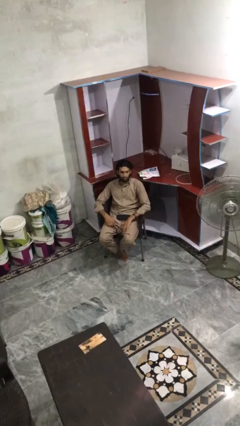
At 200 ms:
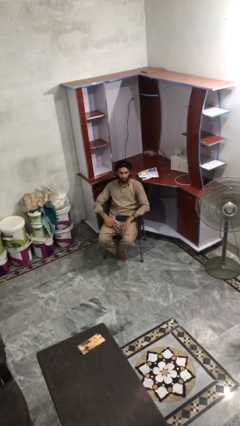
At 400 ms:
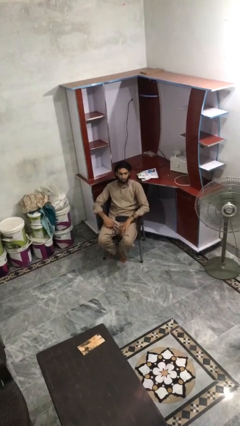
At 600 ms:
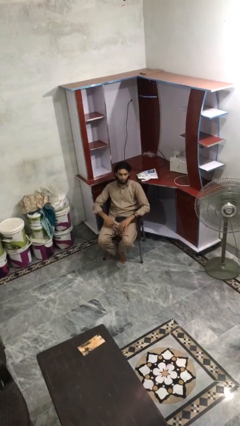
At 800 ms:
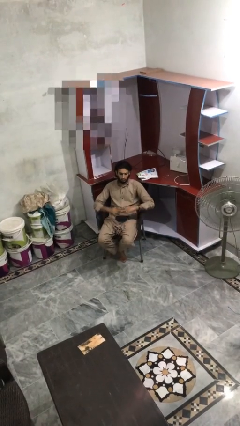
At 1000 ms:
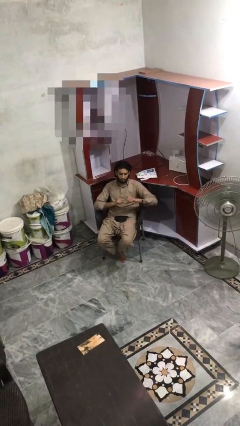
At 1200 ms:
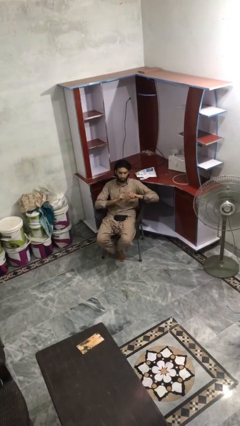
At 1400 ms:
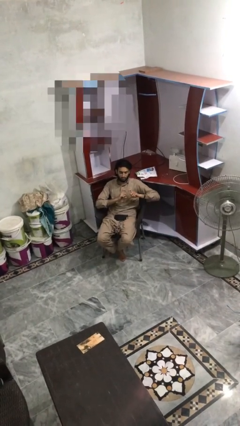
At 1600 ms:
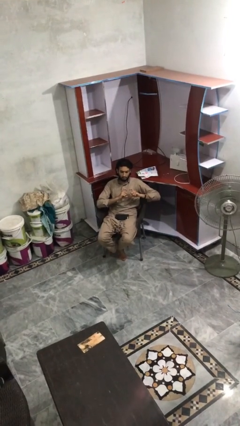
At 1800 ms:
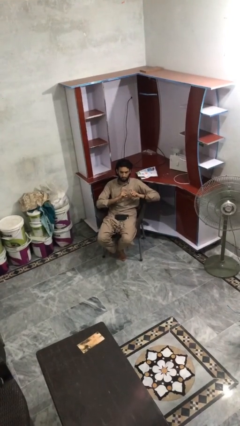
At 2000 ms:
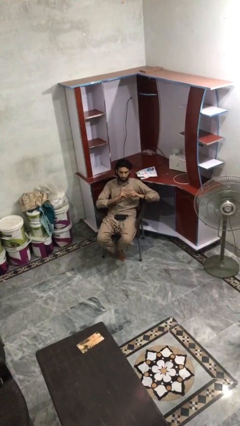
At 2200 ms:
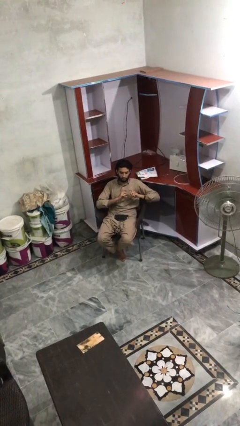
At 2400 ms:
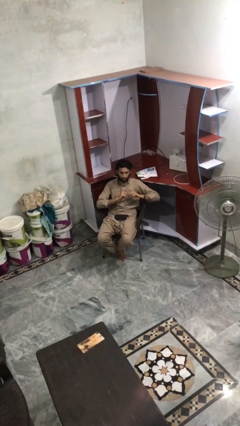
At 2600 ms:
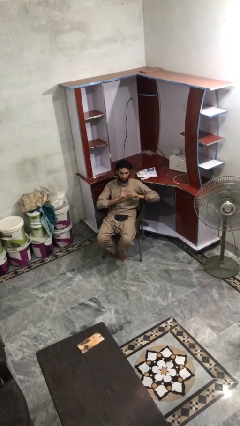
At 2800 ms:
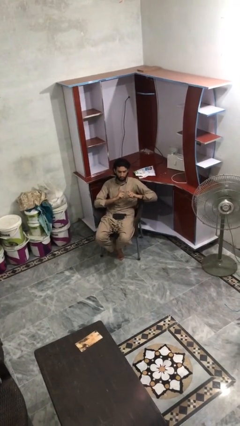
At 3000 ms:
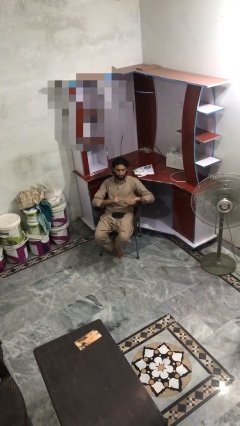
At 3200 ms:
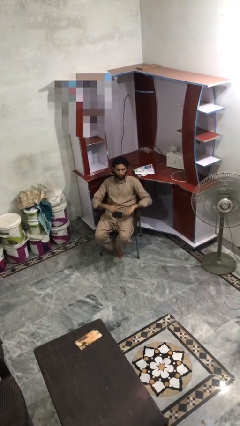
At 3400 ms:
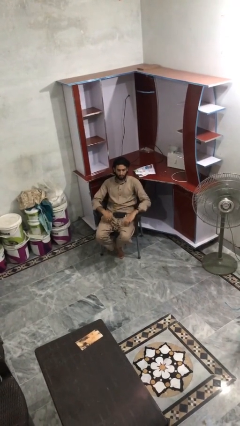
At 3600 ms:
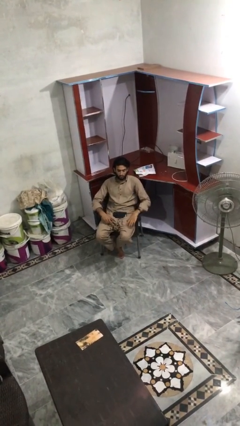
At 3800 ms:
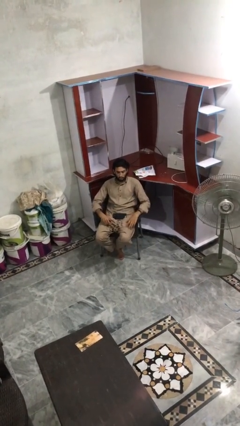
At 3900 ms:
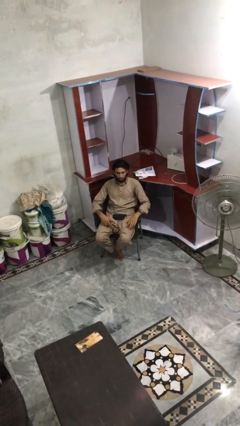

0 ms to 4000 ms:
person gestures heart

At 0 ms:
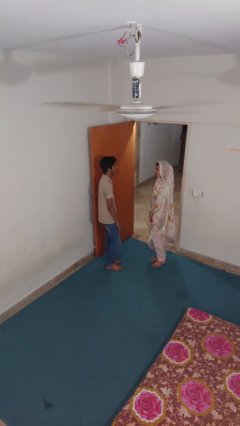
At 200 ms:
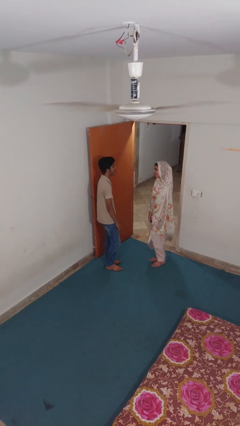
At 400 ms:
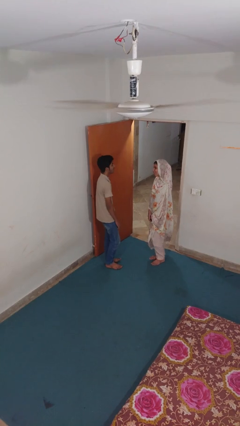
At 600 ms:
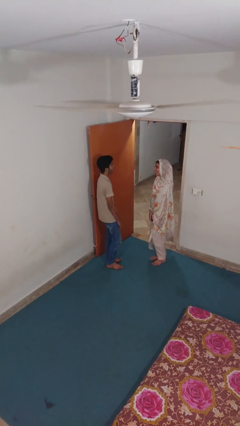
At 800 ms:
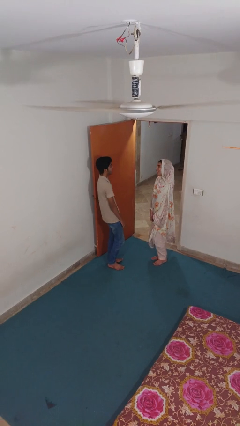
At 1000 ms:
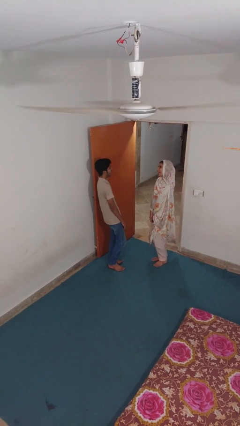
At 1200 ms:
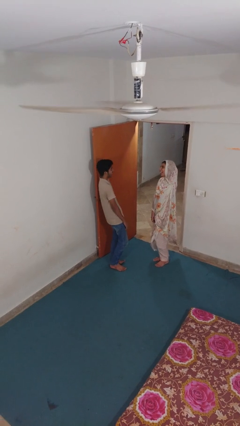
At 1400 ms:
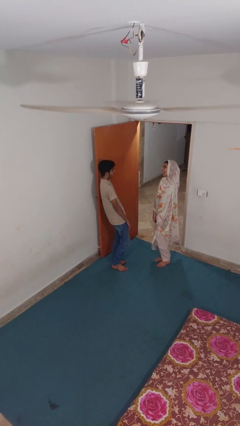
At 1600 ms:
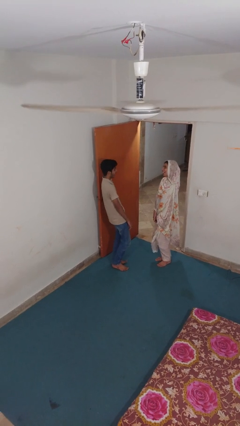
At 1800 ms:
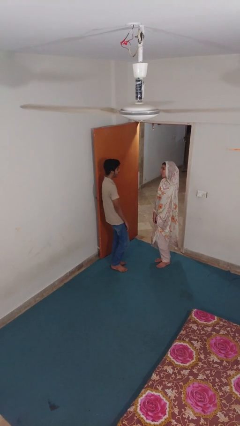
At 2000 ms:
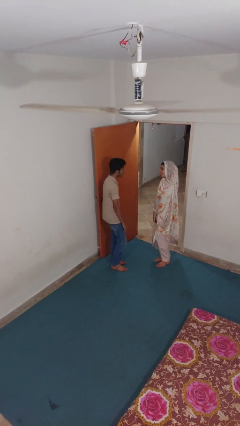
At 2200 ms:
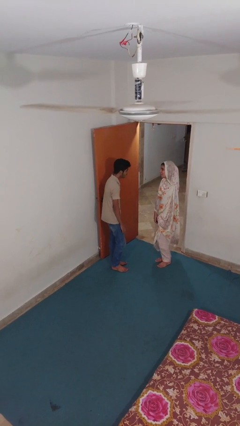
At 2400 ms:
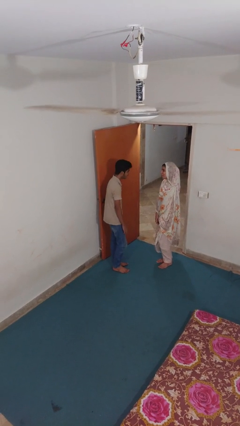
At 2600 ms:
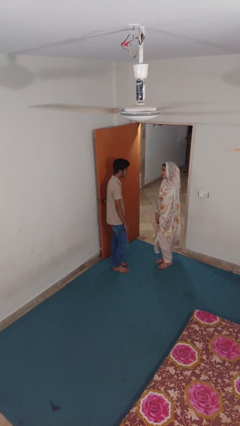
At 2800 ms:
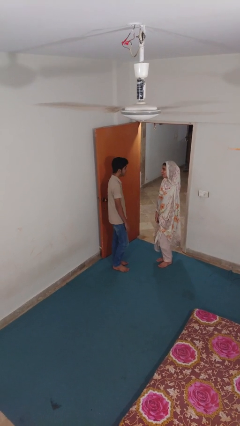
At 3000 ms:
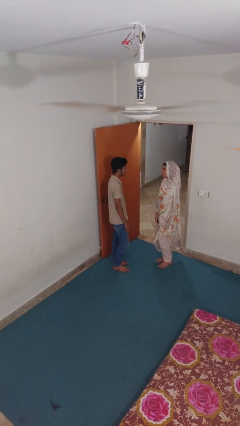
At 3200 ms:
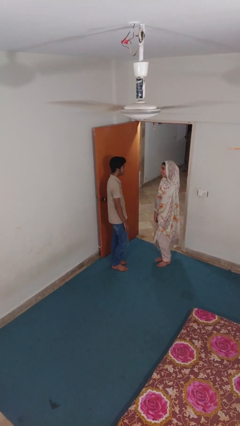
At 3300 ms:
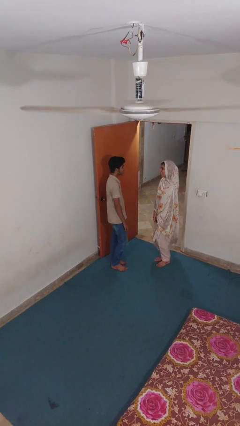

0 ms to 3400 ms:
person laughs with person

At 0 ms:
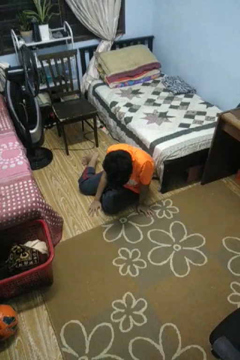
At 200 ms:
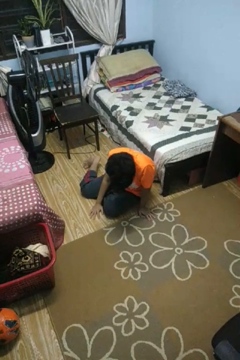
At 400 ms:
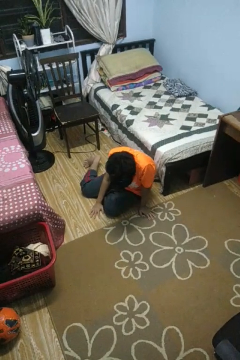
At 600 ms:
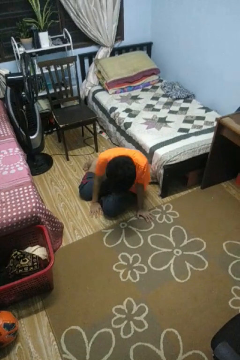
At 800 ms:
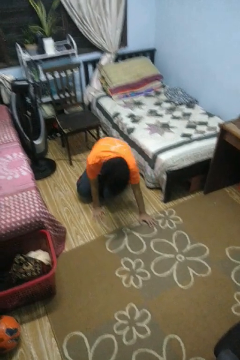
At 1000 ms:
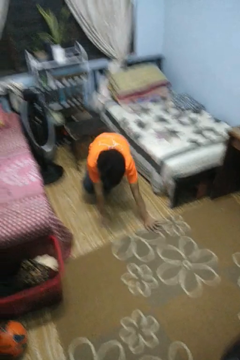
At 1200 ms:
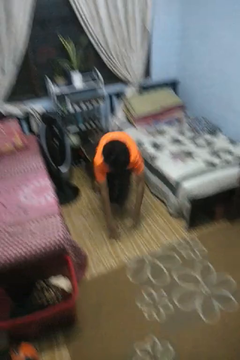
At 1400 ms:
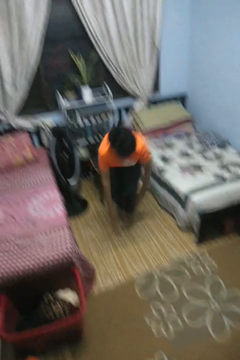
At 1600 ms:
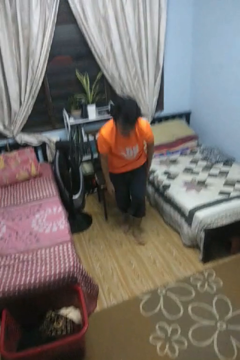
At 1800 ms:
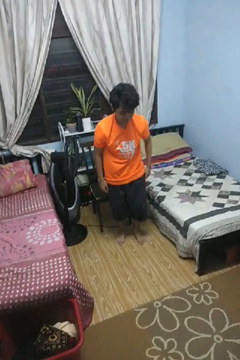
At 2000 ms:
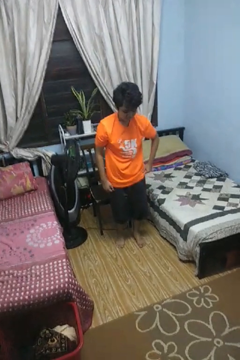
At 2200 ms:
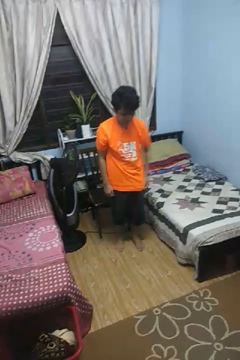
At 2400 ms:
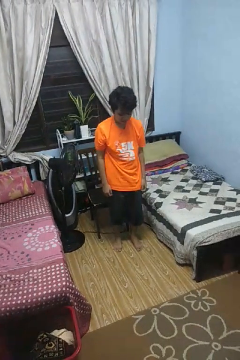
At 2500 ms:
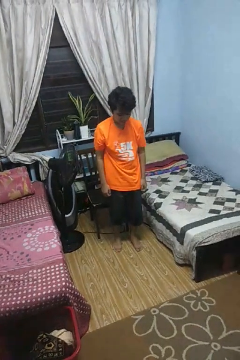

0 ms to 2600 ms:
person stands up from floor

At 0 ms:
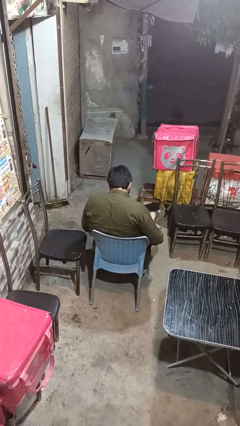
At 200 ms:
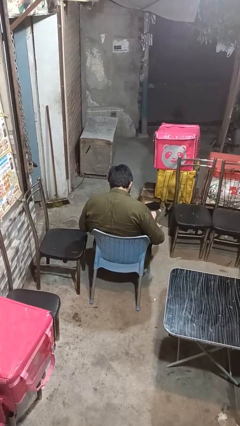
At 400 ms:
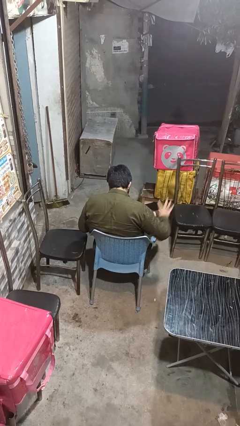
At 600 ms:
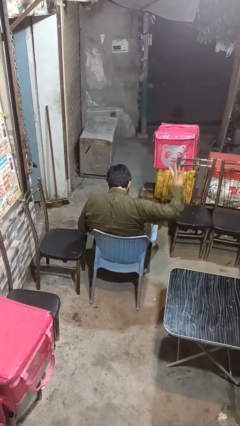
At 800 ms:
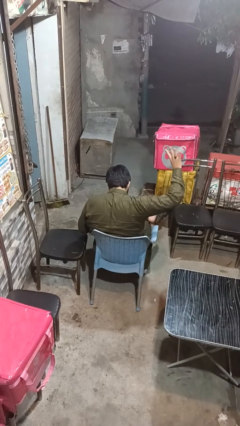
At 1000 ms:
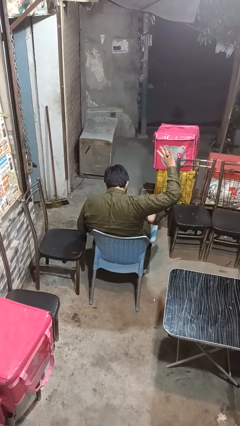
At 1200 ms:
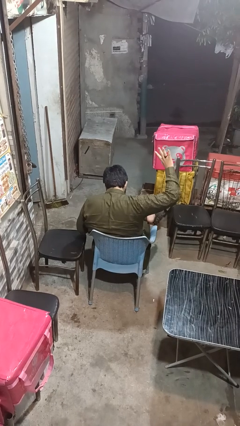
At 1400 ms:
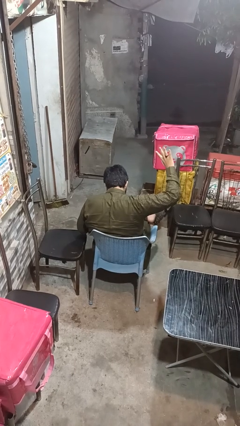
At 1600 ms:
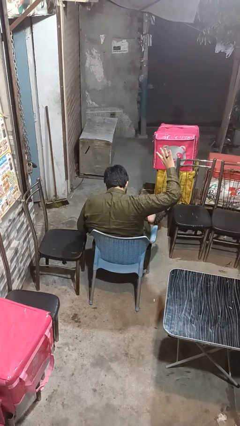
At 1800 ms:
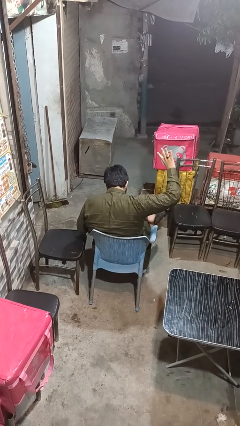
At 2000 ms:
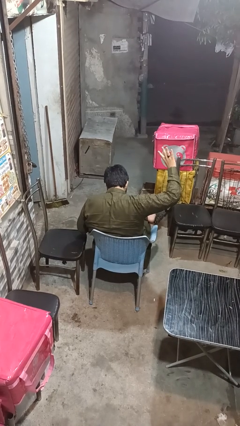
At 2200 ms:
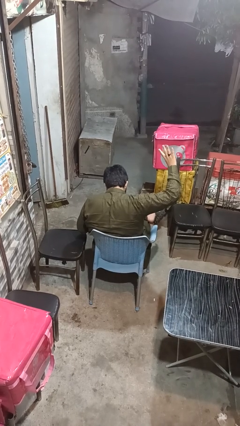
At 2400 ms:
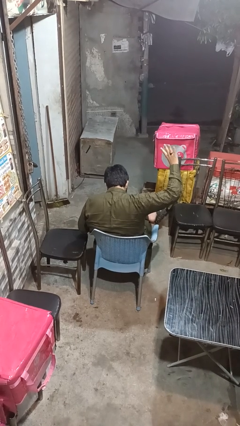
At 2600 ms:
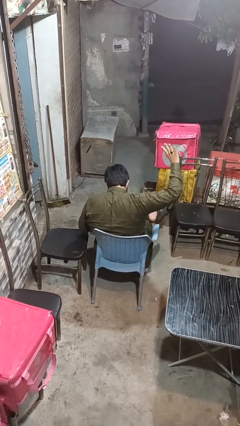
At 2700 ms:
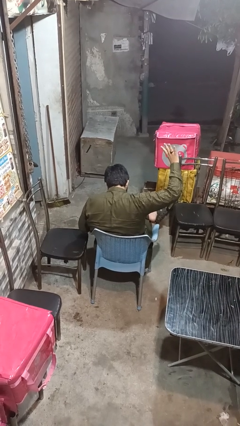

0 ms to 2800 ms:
person gestures number four

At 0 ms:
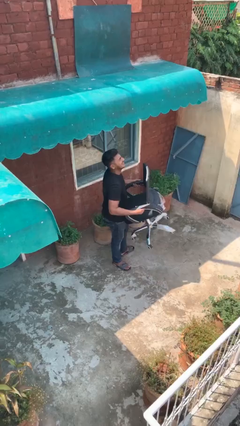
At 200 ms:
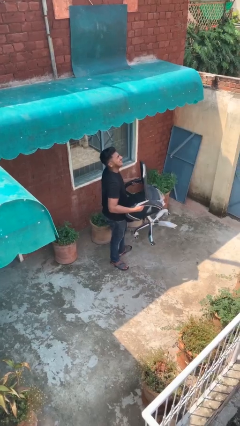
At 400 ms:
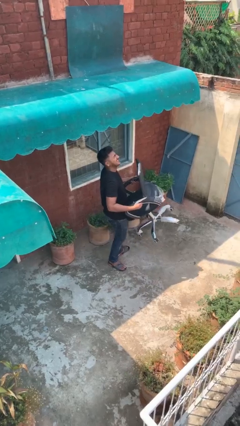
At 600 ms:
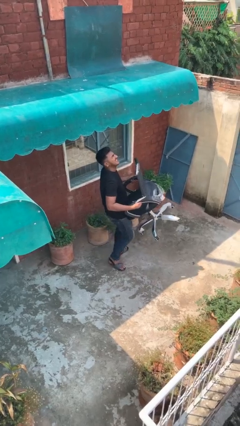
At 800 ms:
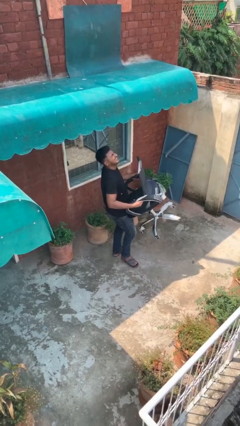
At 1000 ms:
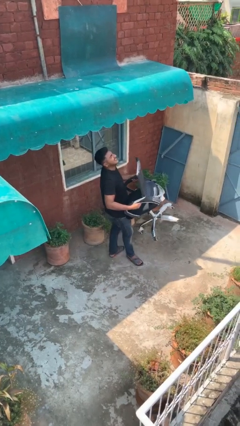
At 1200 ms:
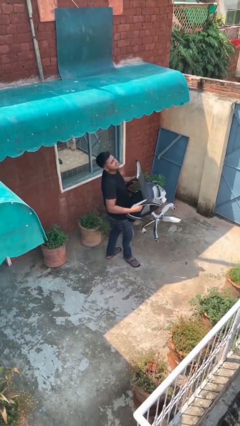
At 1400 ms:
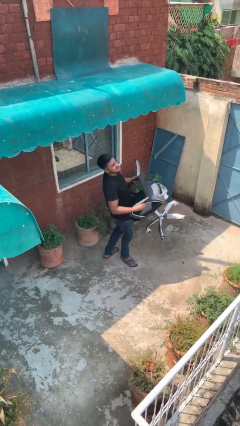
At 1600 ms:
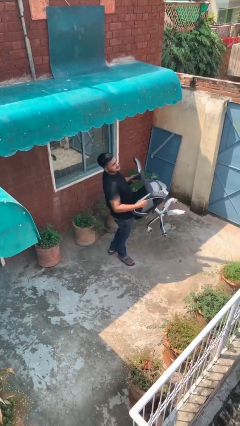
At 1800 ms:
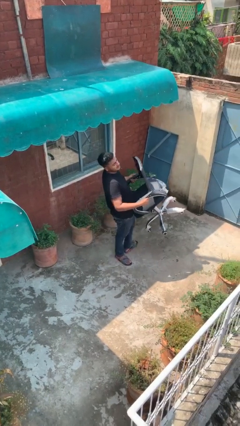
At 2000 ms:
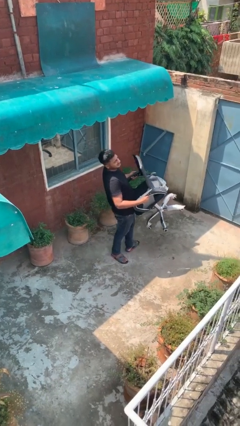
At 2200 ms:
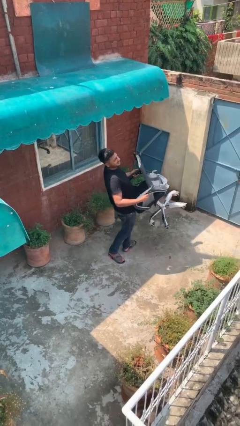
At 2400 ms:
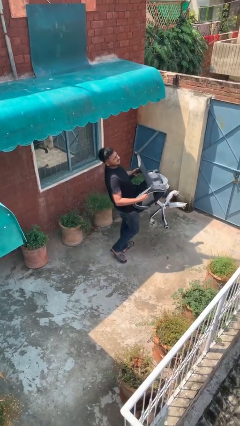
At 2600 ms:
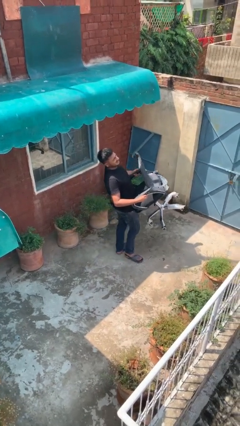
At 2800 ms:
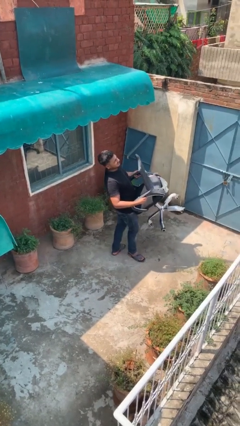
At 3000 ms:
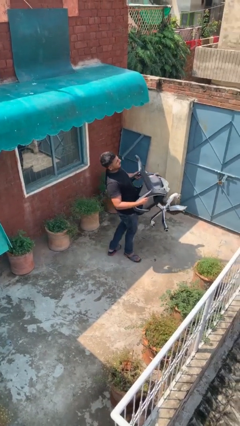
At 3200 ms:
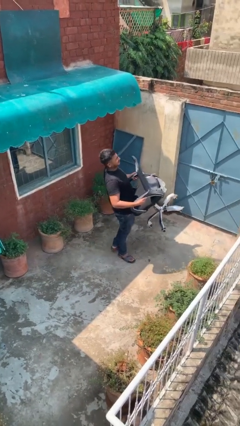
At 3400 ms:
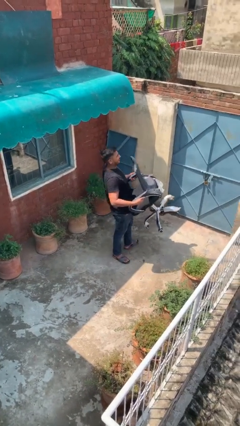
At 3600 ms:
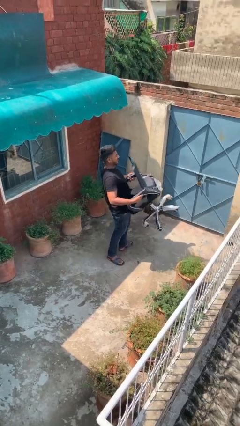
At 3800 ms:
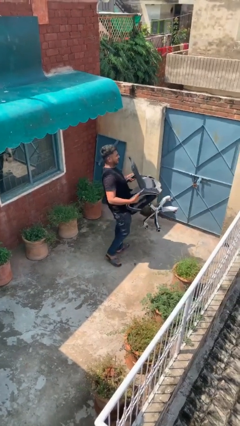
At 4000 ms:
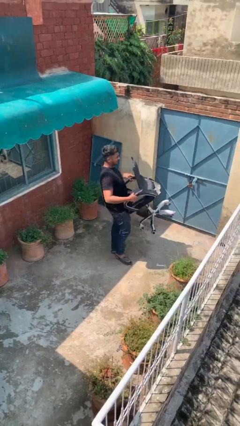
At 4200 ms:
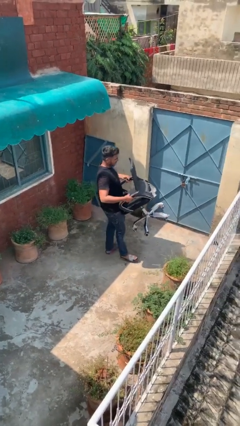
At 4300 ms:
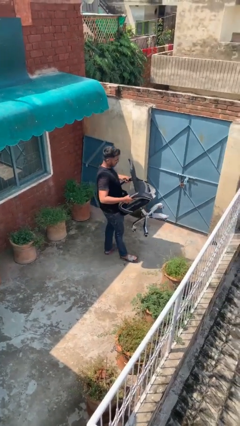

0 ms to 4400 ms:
person carries heavy object

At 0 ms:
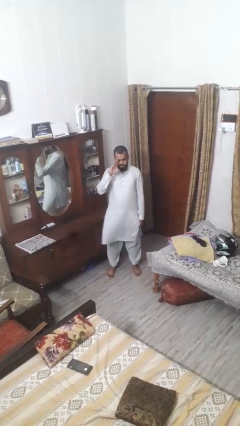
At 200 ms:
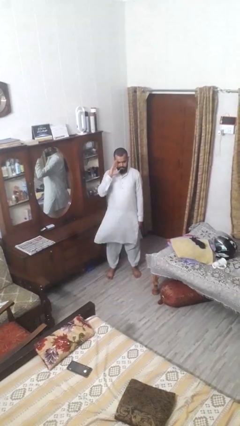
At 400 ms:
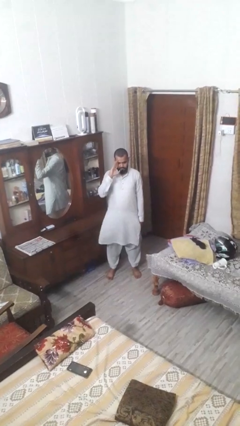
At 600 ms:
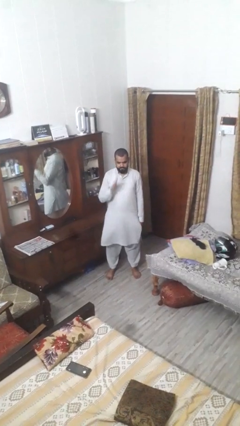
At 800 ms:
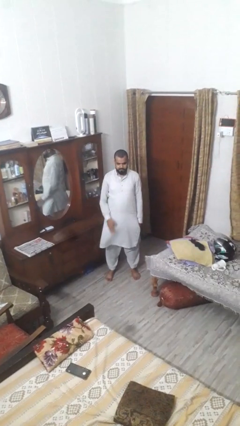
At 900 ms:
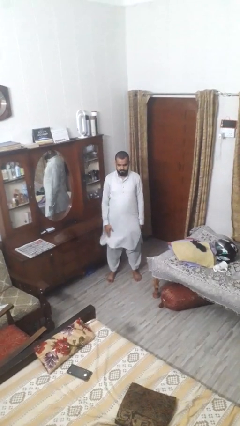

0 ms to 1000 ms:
person salutes
